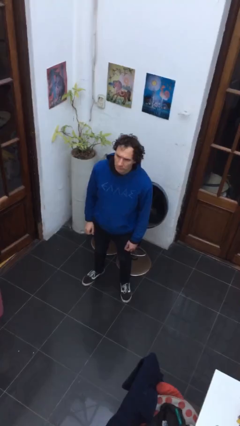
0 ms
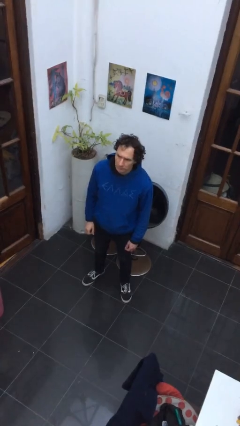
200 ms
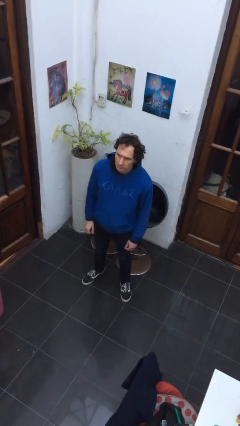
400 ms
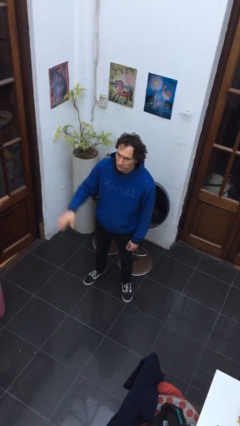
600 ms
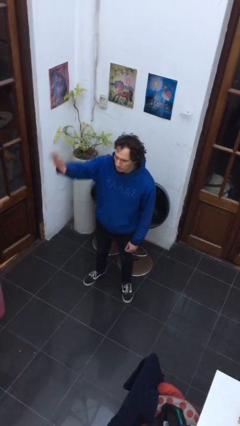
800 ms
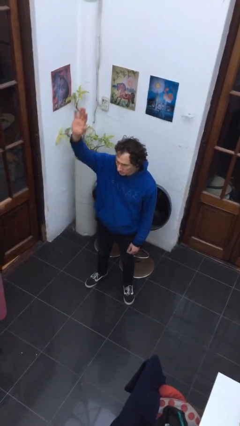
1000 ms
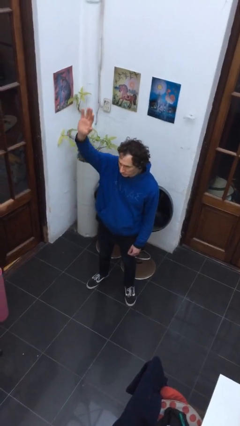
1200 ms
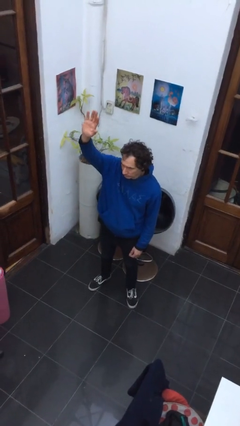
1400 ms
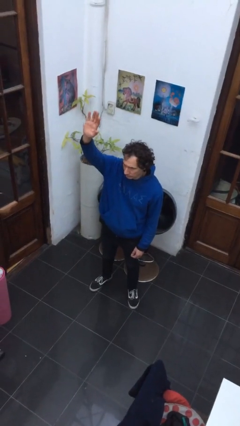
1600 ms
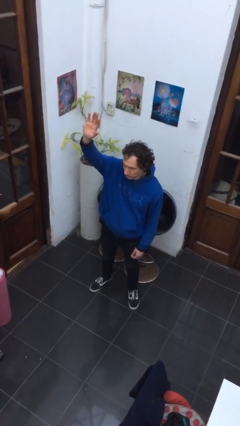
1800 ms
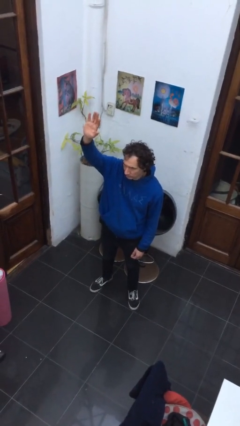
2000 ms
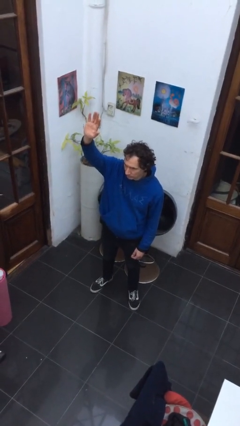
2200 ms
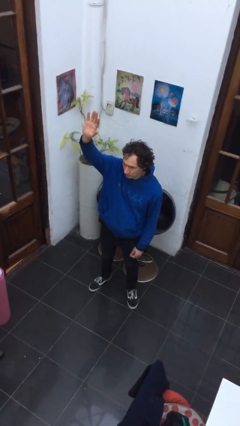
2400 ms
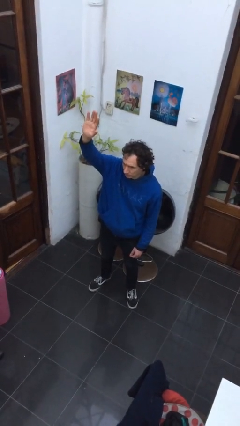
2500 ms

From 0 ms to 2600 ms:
person gestures raise hand

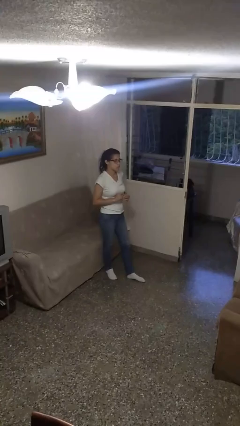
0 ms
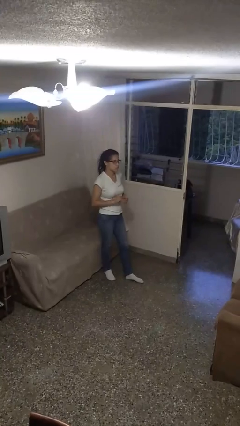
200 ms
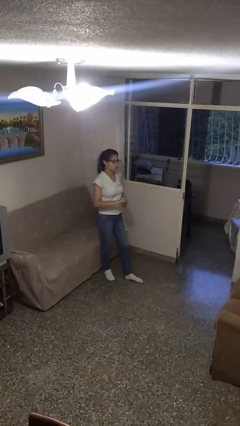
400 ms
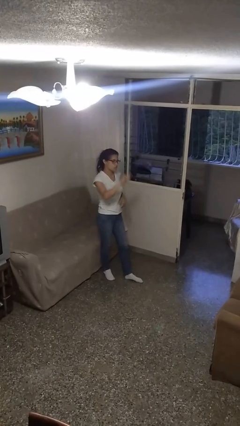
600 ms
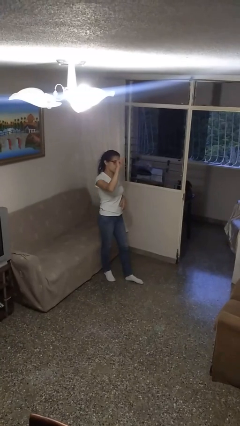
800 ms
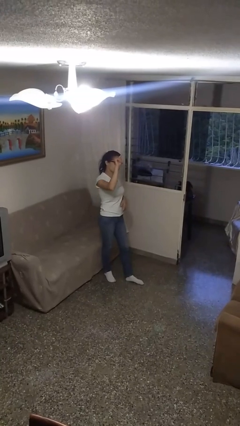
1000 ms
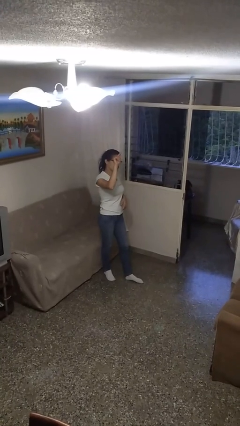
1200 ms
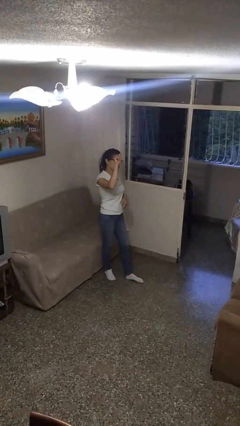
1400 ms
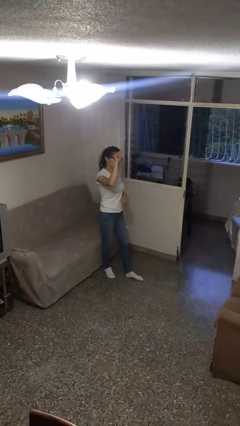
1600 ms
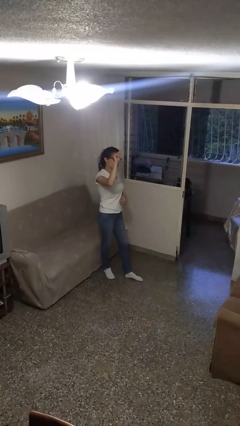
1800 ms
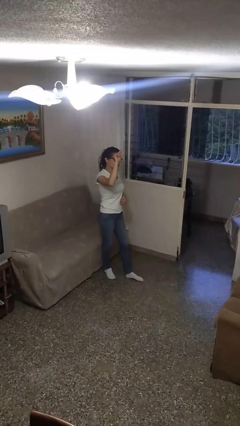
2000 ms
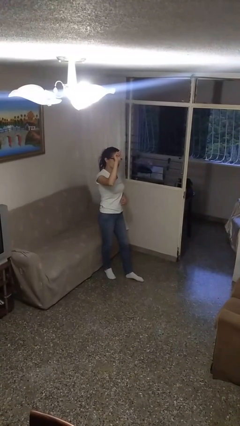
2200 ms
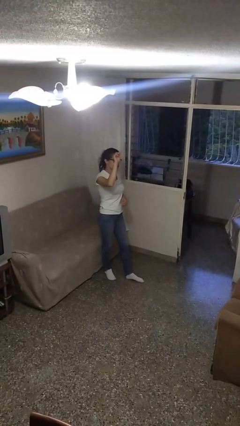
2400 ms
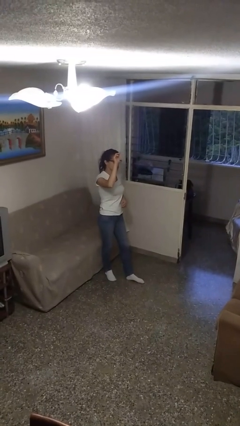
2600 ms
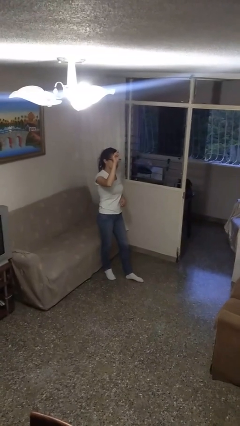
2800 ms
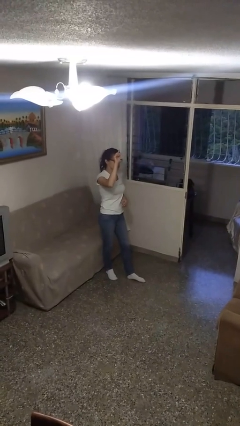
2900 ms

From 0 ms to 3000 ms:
person gestures swipe up

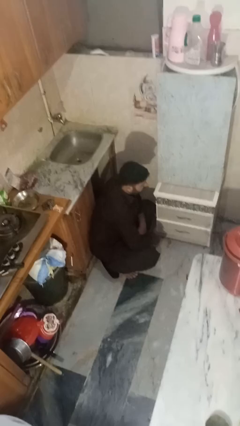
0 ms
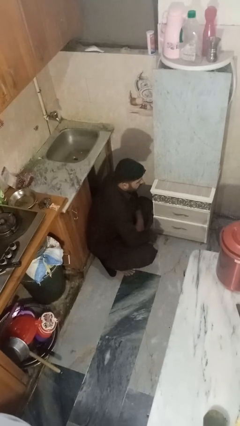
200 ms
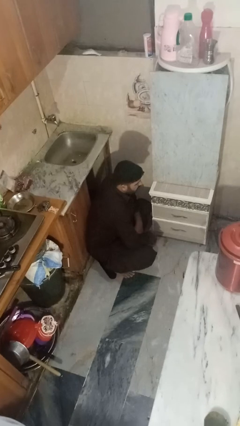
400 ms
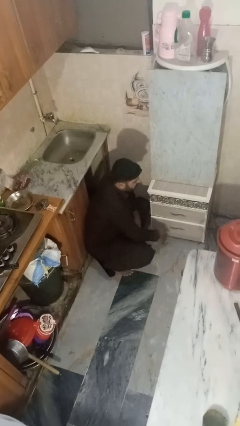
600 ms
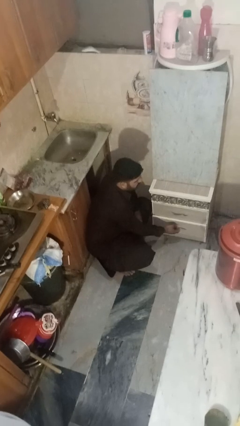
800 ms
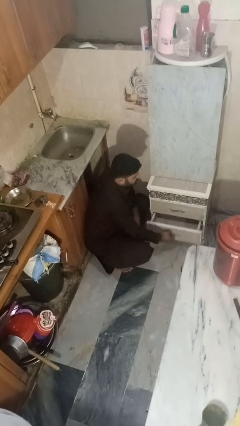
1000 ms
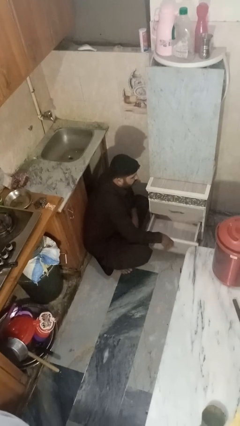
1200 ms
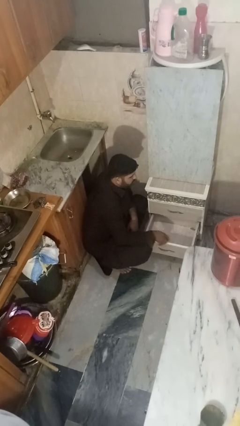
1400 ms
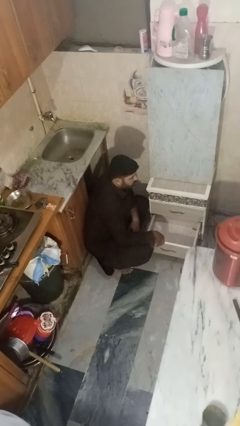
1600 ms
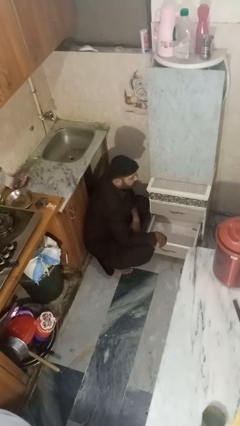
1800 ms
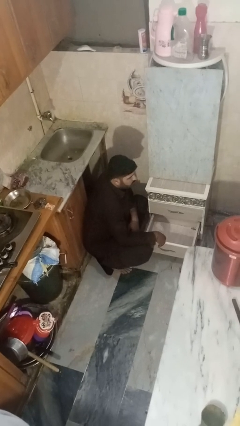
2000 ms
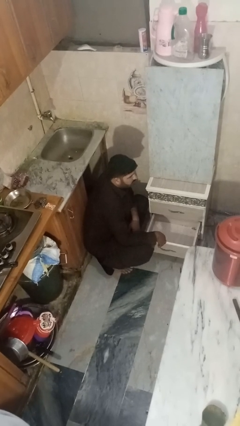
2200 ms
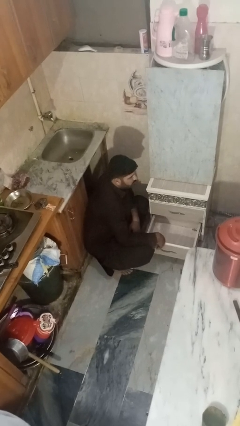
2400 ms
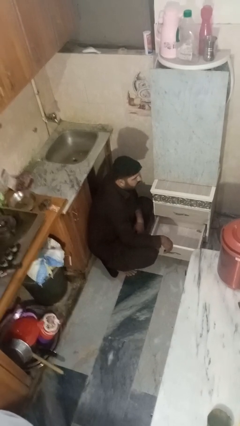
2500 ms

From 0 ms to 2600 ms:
person opens kitchen drawer

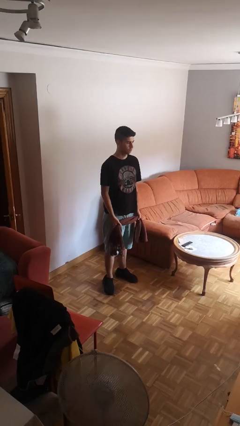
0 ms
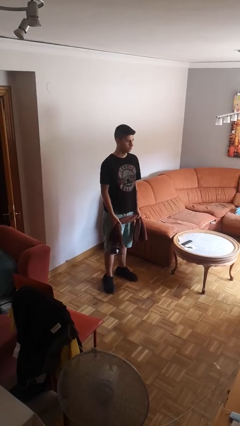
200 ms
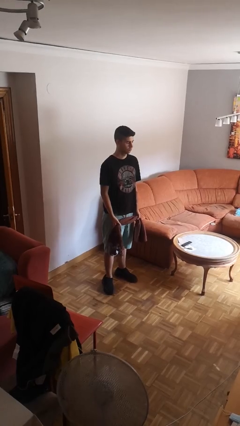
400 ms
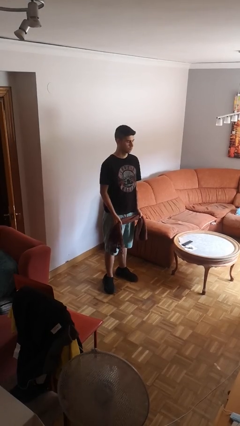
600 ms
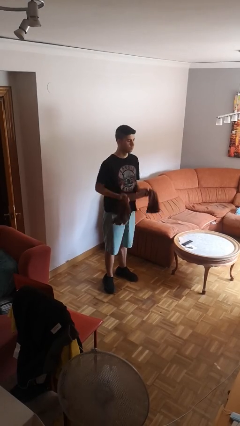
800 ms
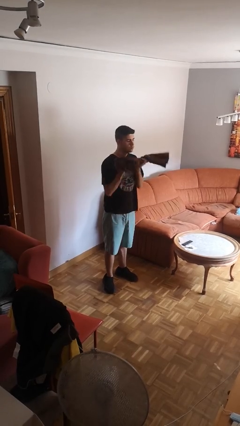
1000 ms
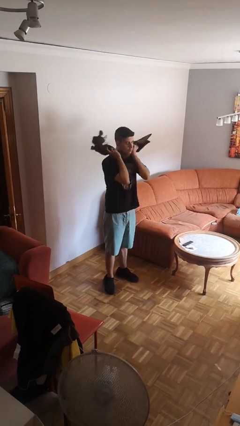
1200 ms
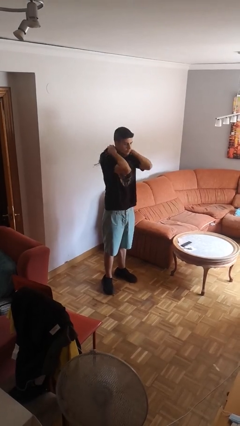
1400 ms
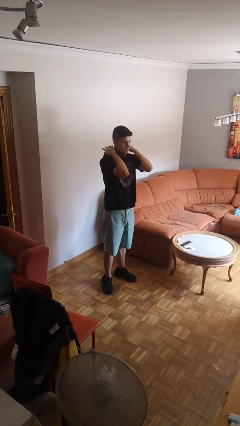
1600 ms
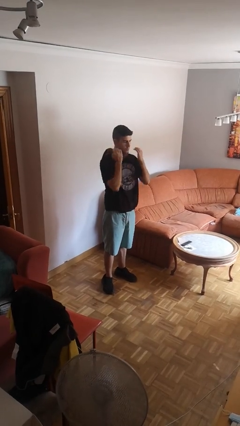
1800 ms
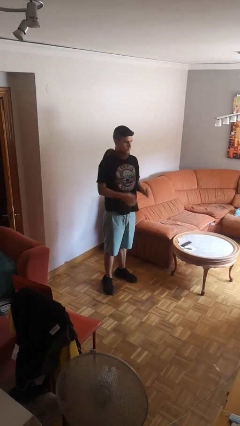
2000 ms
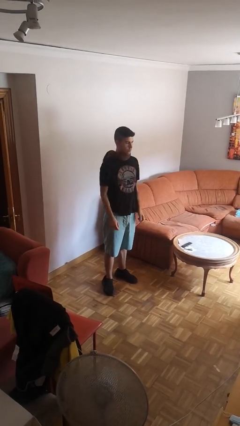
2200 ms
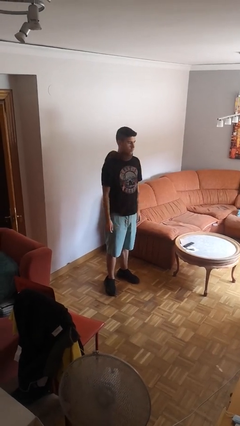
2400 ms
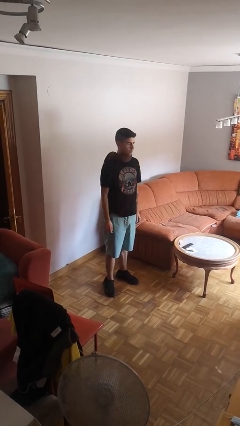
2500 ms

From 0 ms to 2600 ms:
person puts on scarf

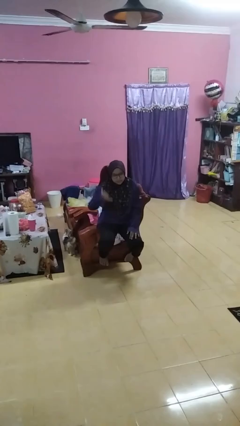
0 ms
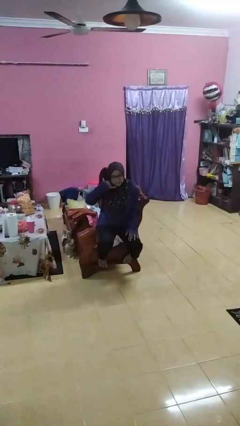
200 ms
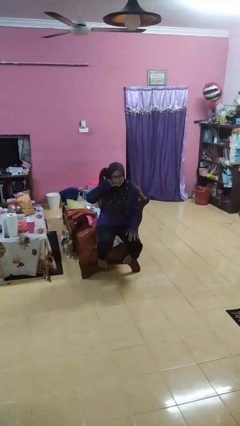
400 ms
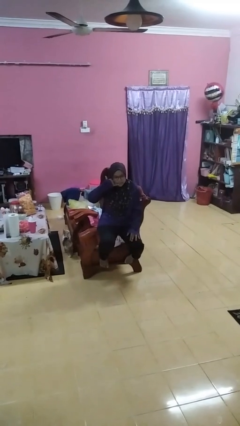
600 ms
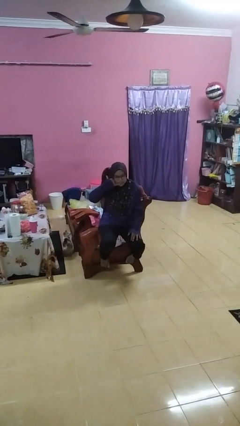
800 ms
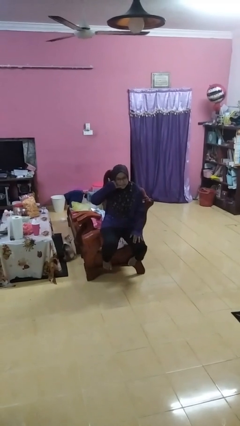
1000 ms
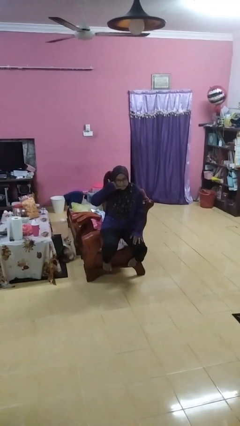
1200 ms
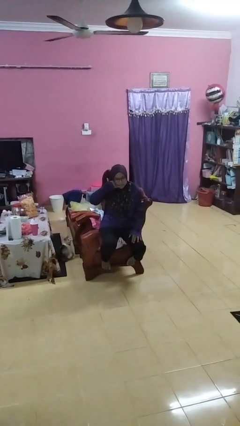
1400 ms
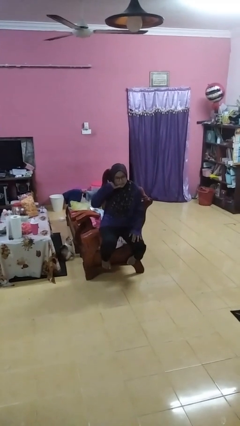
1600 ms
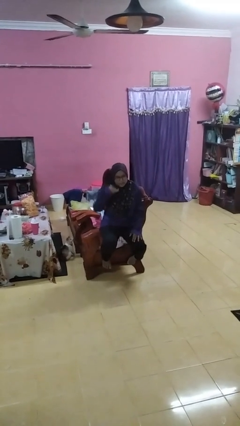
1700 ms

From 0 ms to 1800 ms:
person gestures call me

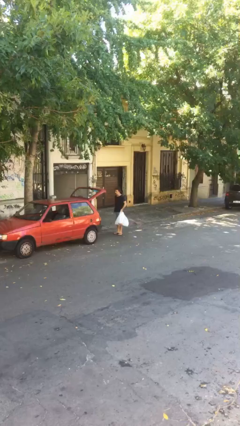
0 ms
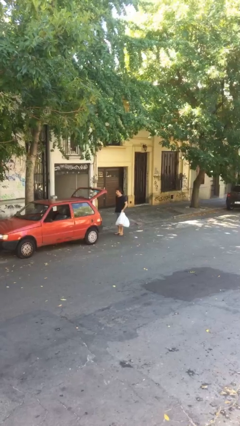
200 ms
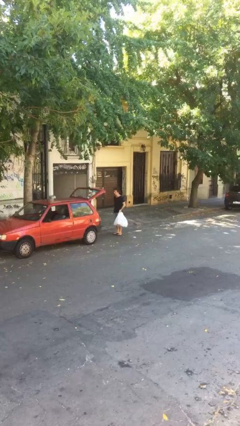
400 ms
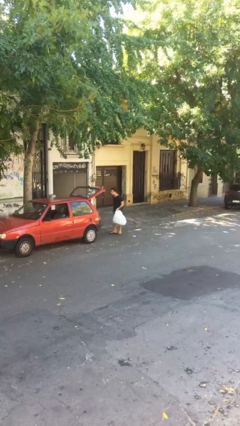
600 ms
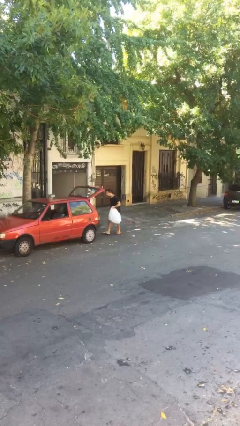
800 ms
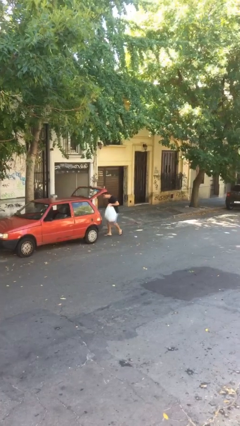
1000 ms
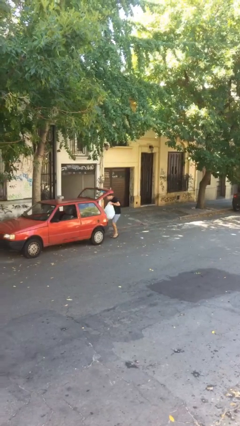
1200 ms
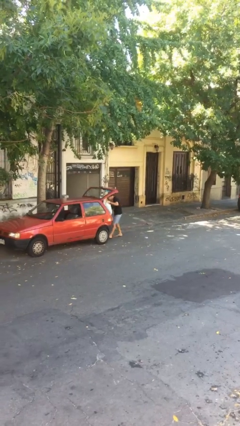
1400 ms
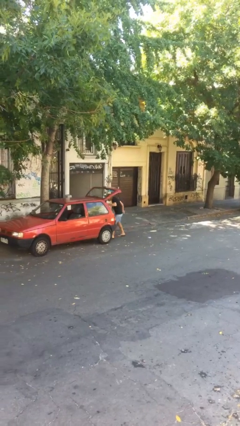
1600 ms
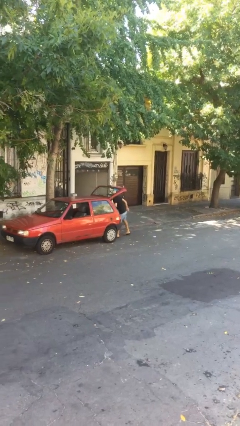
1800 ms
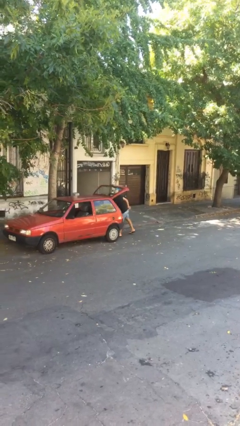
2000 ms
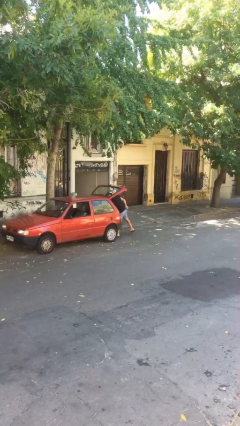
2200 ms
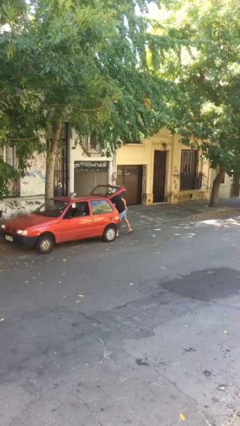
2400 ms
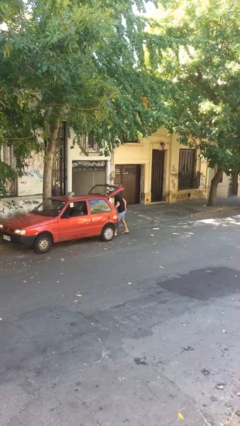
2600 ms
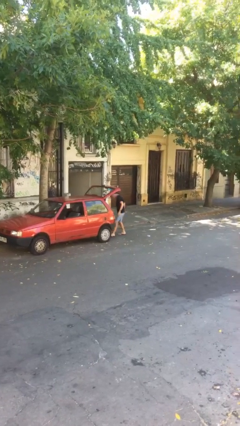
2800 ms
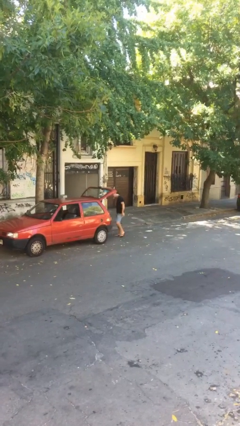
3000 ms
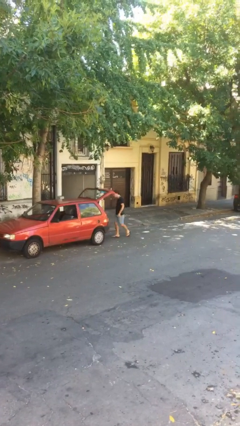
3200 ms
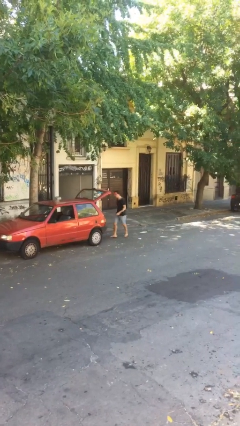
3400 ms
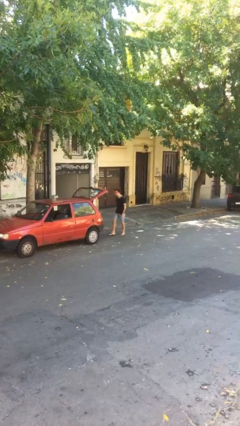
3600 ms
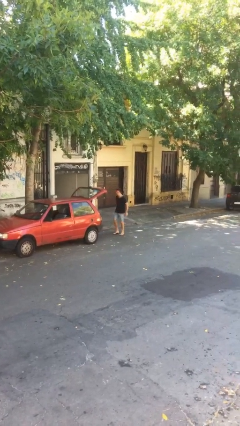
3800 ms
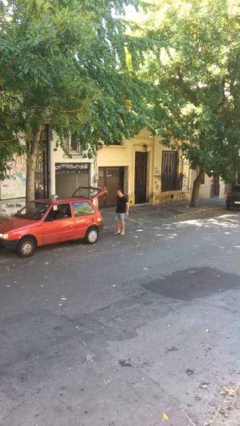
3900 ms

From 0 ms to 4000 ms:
person loads car

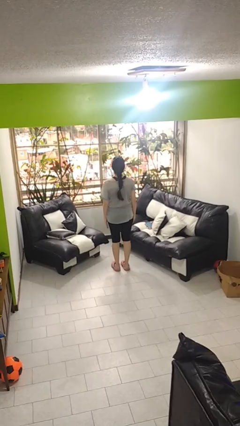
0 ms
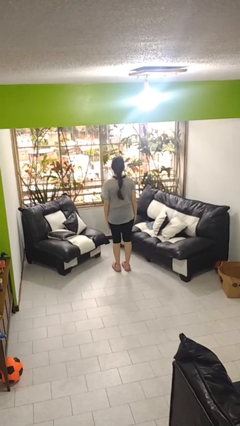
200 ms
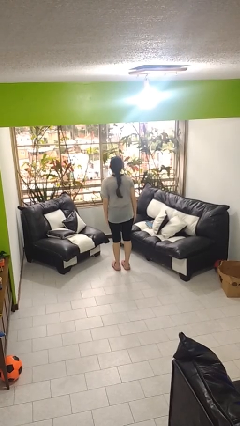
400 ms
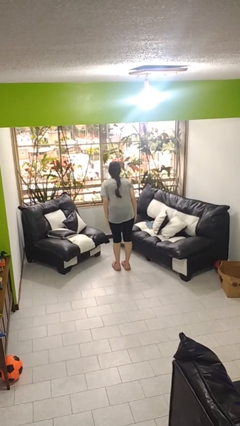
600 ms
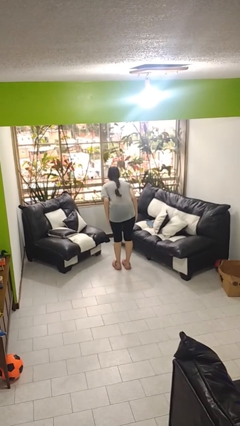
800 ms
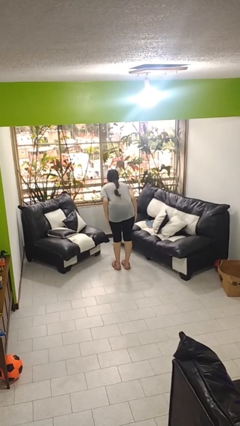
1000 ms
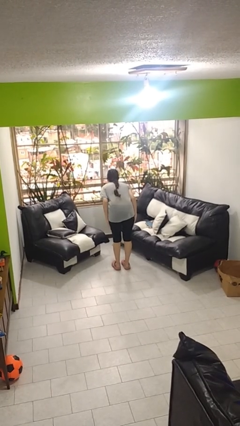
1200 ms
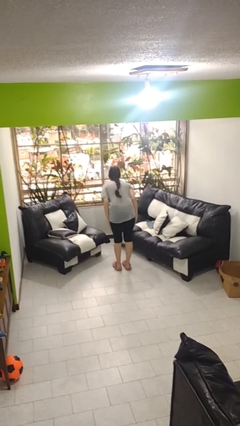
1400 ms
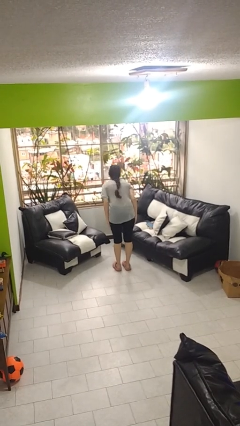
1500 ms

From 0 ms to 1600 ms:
person bows
